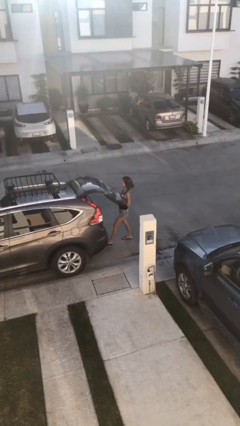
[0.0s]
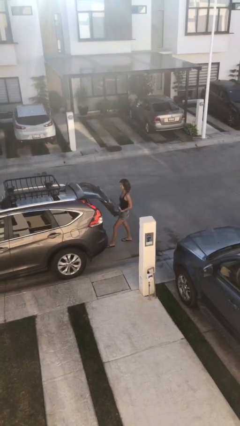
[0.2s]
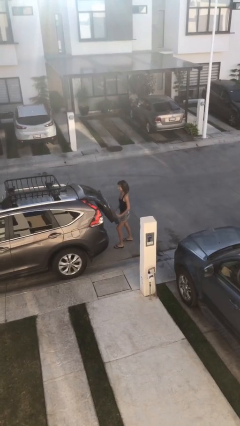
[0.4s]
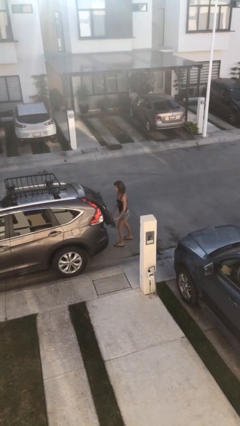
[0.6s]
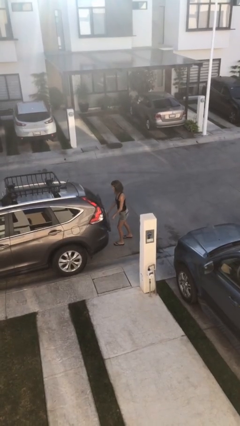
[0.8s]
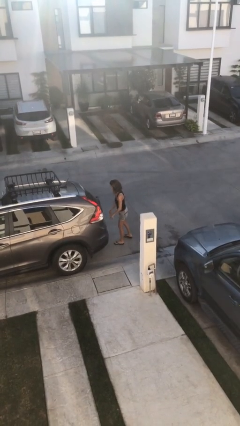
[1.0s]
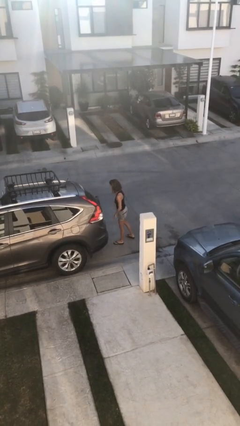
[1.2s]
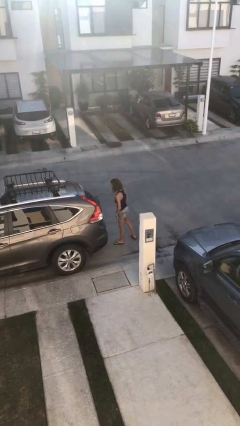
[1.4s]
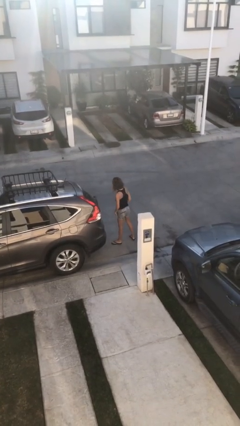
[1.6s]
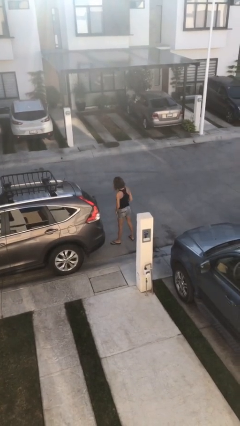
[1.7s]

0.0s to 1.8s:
person closes car trunk

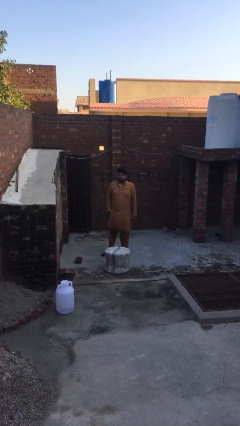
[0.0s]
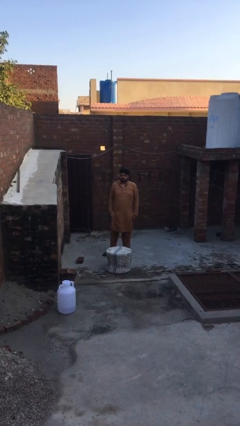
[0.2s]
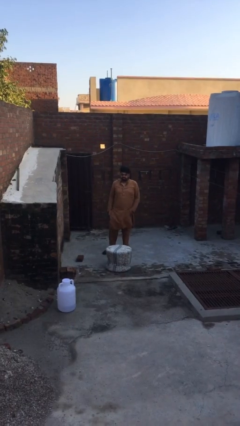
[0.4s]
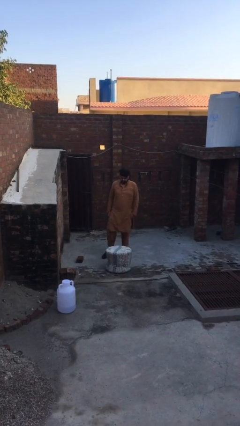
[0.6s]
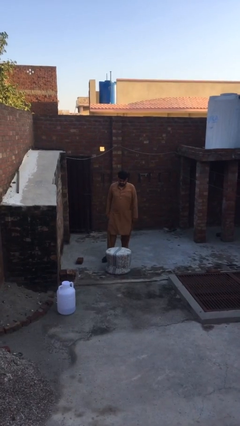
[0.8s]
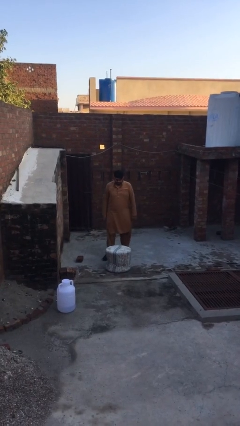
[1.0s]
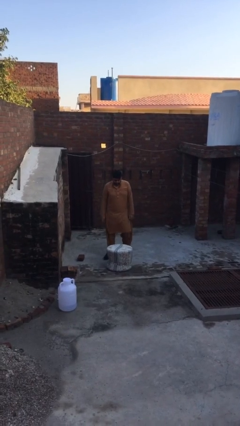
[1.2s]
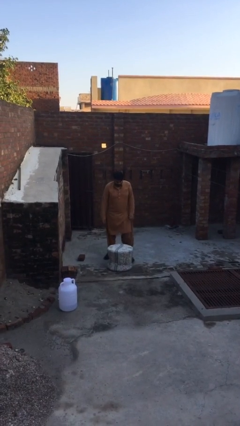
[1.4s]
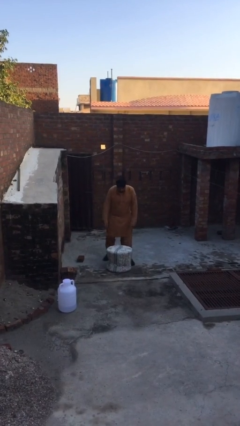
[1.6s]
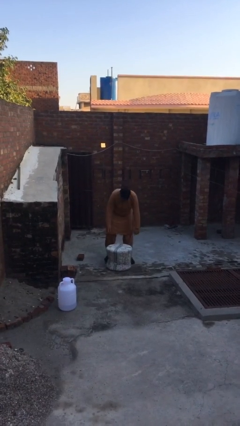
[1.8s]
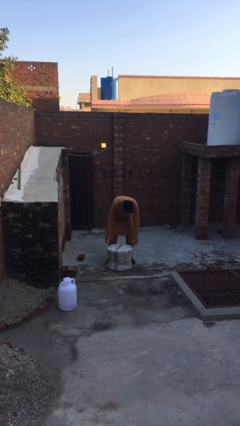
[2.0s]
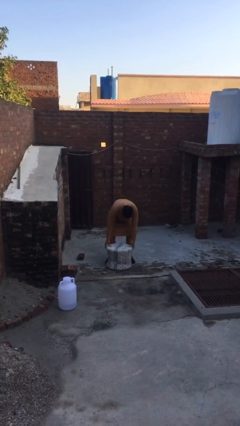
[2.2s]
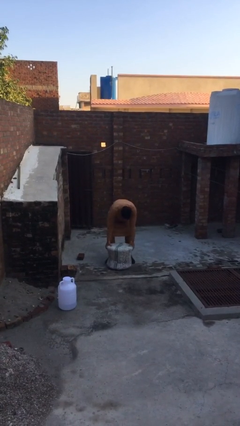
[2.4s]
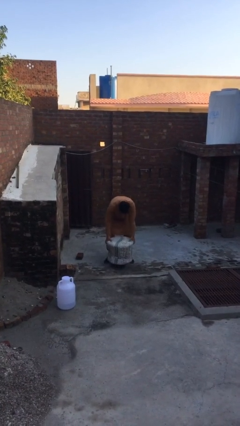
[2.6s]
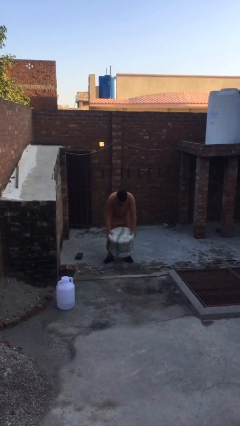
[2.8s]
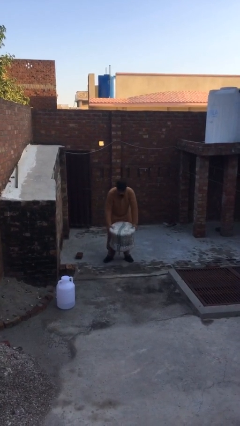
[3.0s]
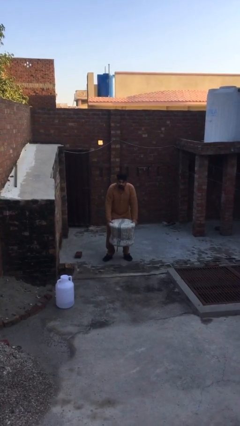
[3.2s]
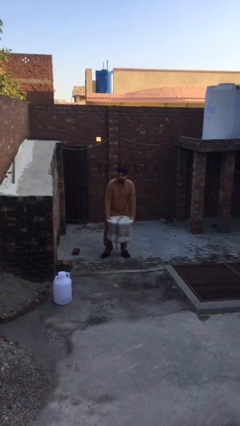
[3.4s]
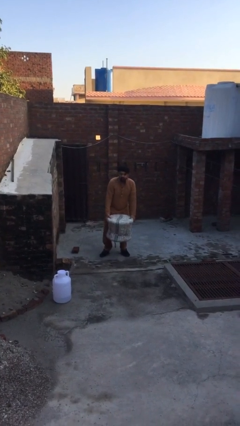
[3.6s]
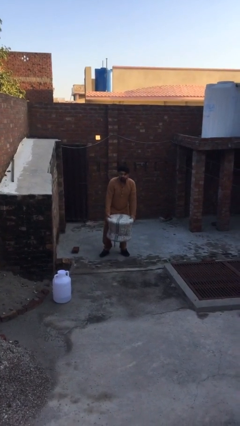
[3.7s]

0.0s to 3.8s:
person picks up object from floor

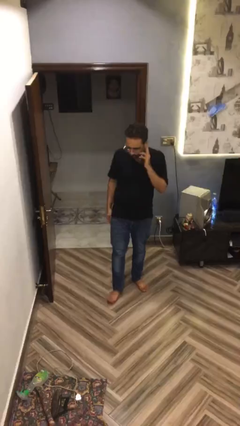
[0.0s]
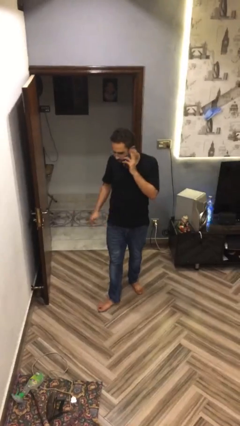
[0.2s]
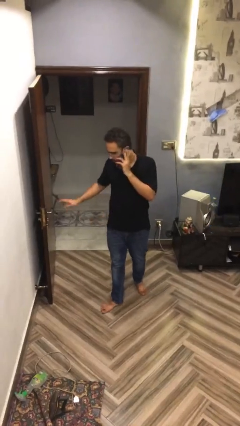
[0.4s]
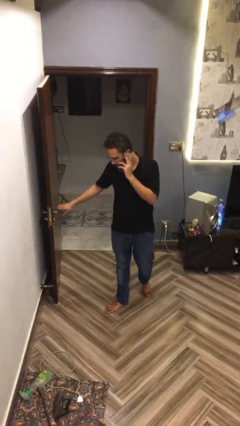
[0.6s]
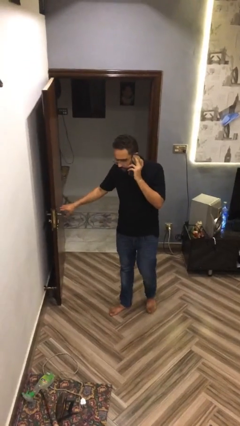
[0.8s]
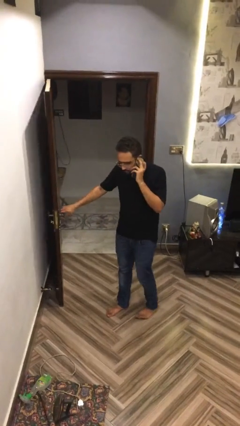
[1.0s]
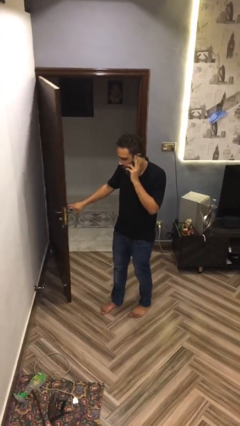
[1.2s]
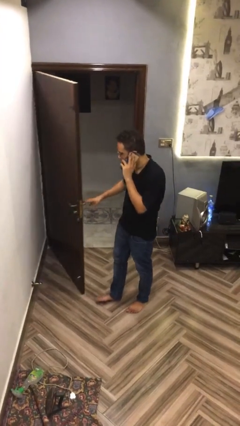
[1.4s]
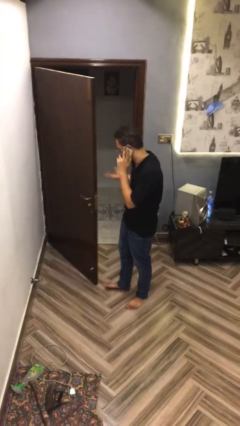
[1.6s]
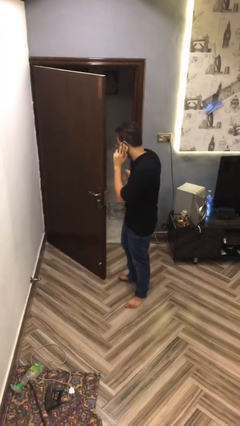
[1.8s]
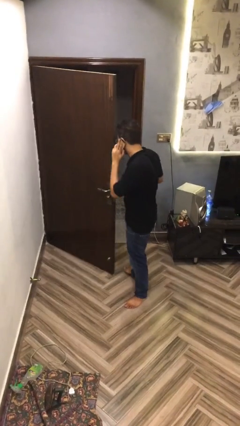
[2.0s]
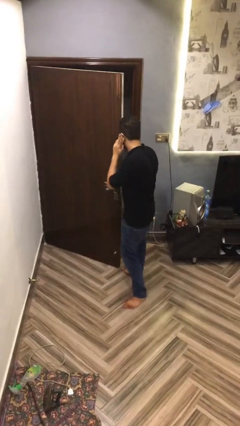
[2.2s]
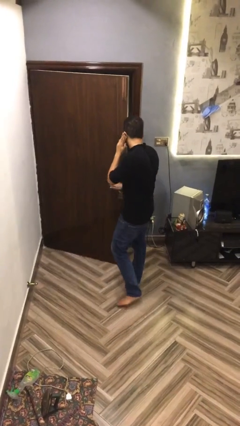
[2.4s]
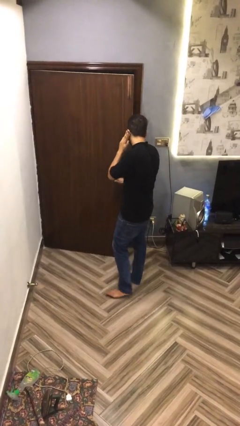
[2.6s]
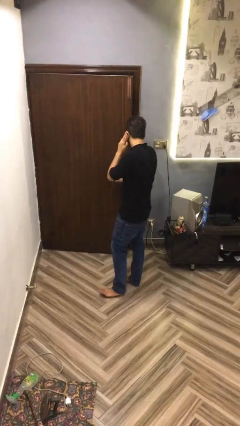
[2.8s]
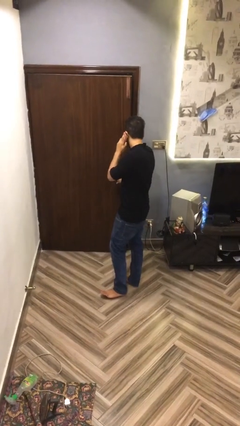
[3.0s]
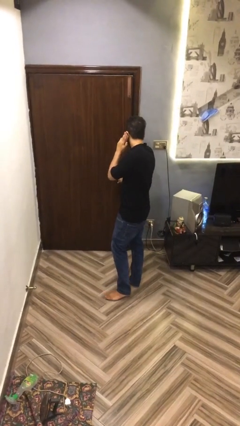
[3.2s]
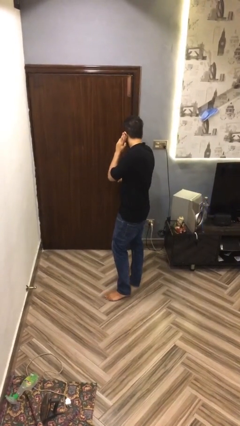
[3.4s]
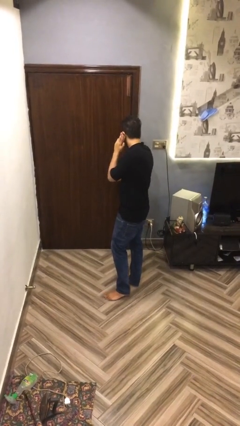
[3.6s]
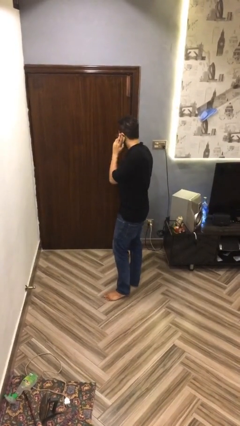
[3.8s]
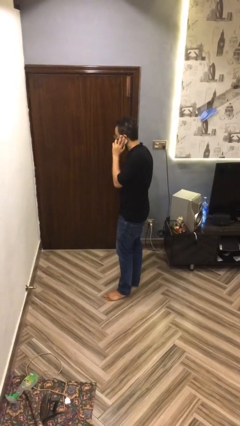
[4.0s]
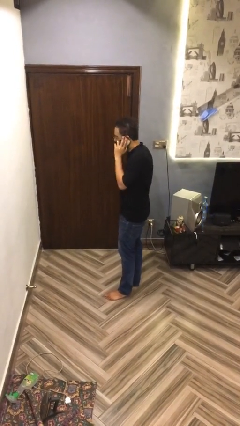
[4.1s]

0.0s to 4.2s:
person closes facility door

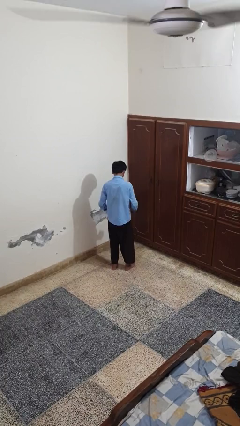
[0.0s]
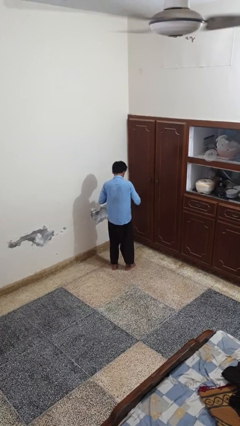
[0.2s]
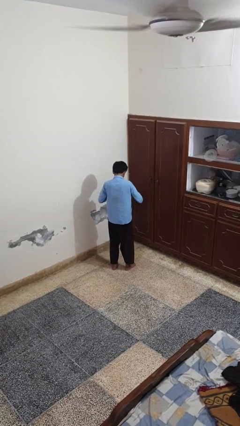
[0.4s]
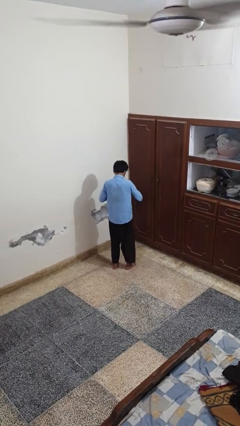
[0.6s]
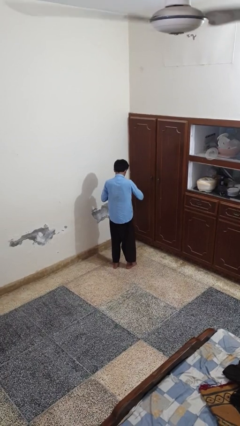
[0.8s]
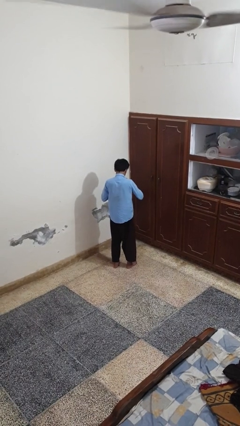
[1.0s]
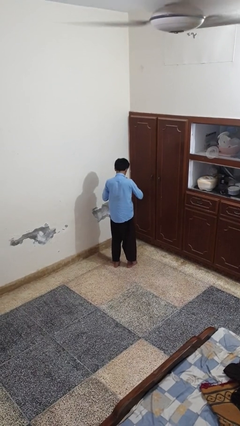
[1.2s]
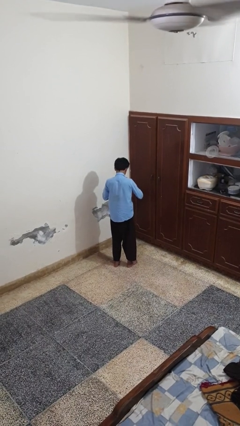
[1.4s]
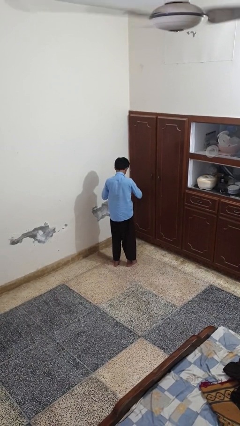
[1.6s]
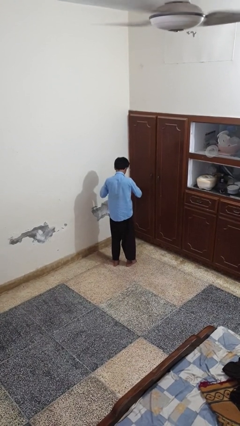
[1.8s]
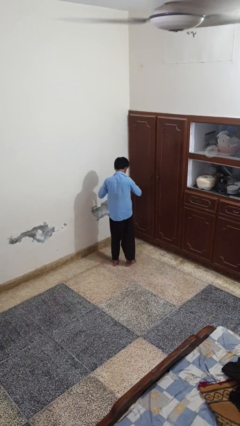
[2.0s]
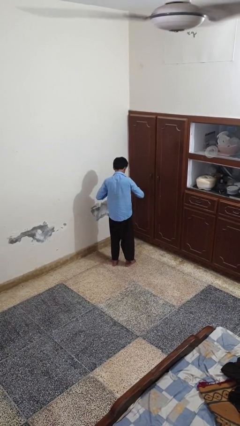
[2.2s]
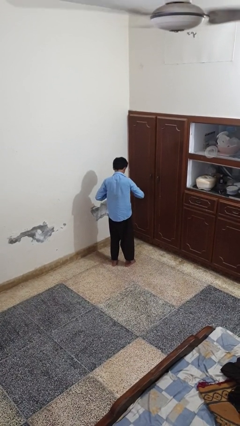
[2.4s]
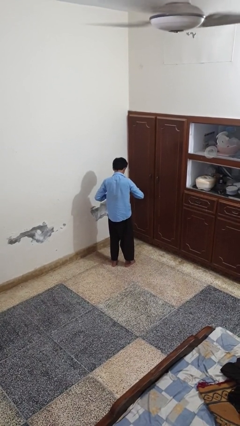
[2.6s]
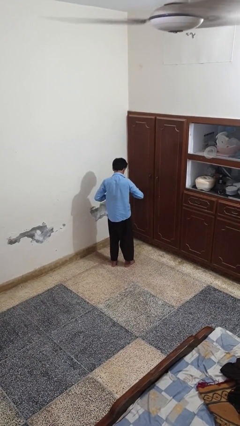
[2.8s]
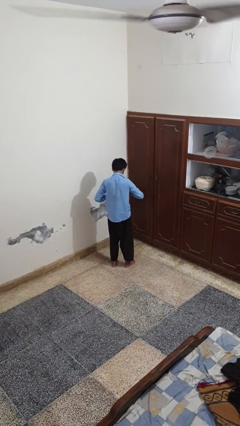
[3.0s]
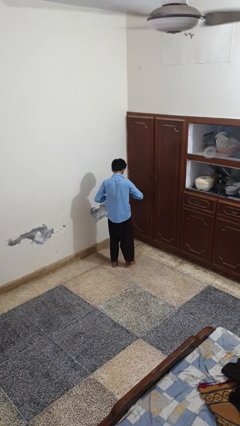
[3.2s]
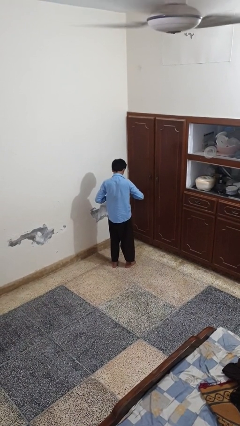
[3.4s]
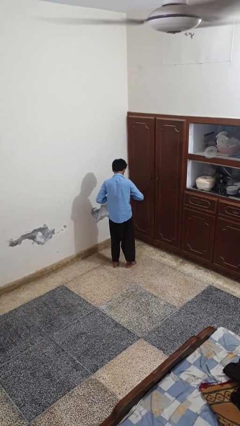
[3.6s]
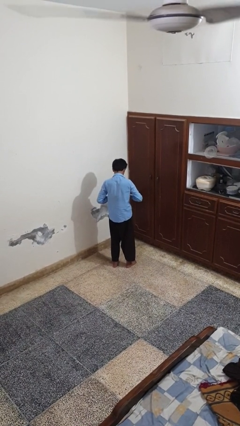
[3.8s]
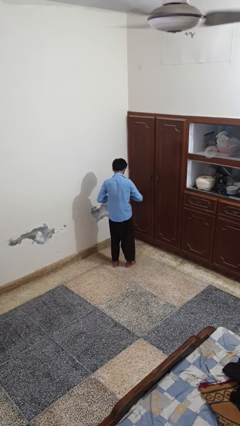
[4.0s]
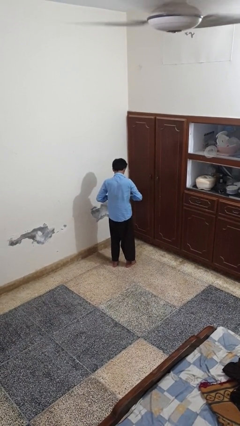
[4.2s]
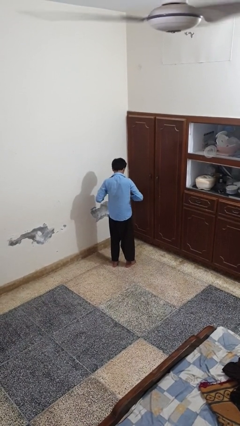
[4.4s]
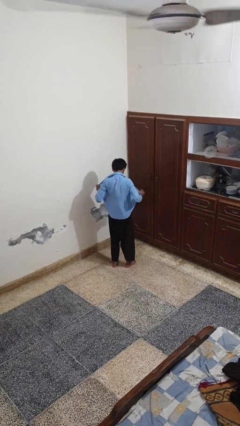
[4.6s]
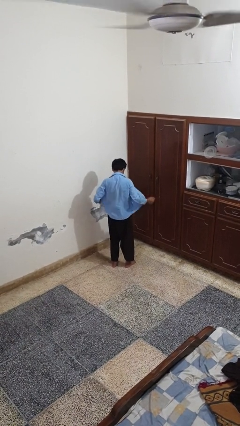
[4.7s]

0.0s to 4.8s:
person unbuttons shirt

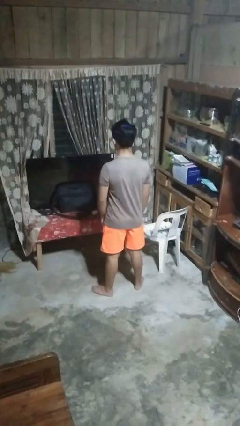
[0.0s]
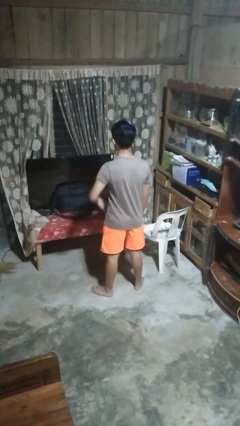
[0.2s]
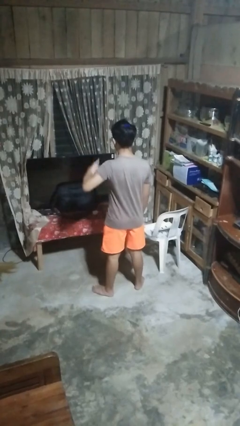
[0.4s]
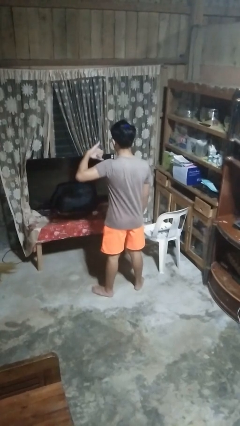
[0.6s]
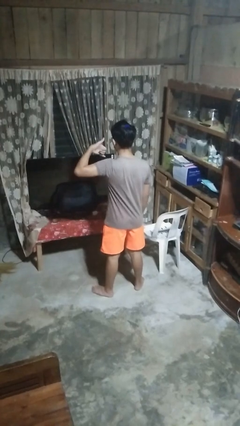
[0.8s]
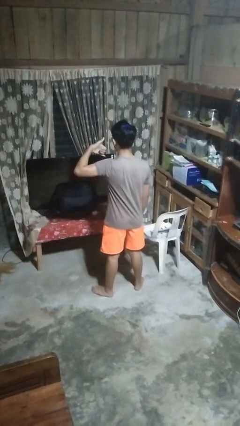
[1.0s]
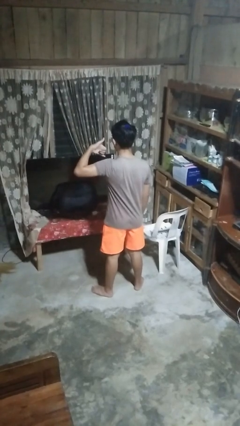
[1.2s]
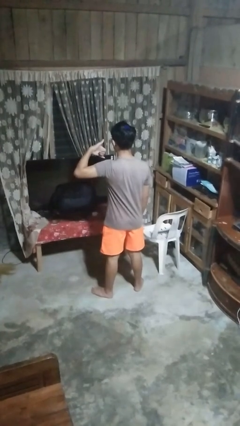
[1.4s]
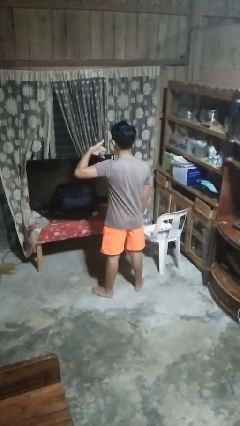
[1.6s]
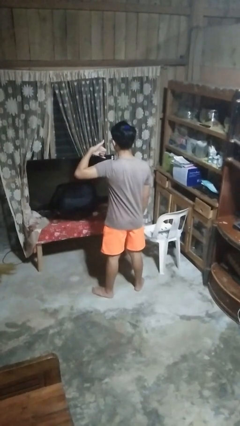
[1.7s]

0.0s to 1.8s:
person gestures call me

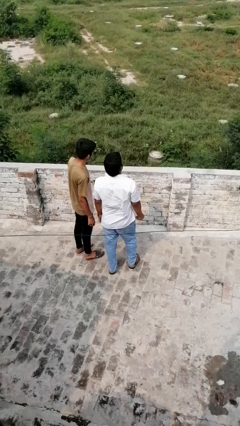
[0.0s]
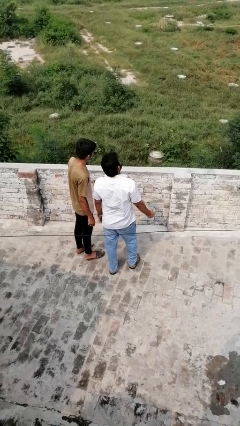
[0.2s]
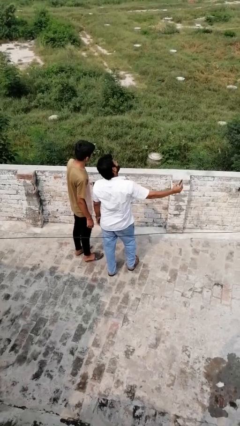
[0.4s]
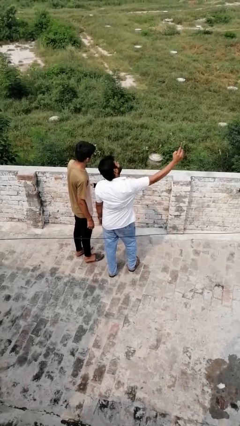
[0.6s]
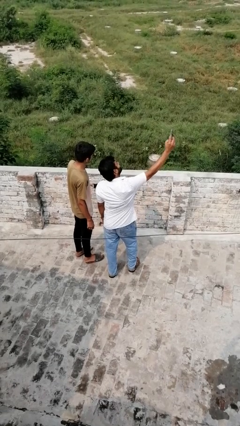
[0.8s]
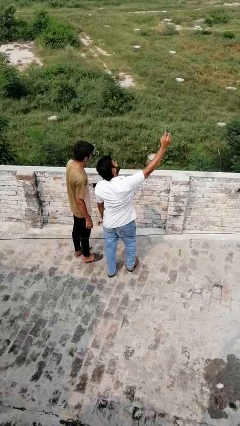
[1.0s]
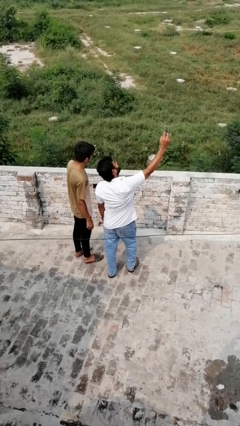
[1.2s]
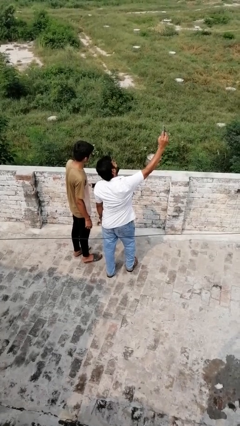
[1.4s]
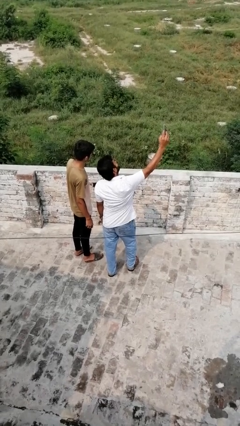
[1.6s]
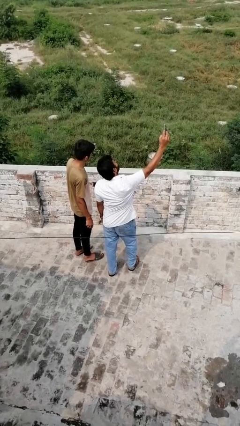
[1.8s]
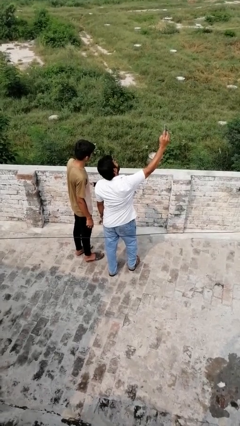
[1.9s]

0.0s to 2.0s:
person takes selfie with person
